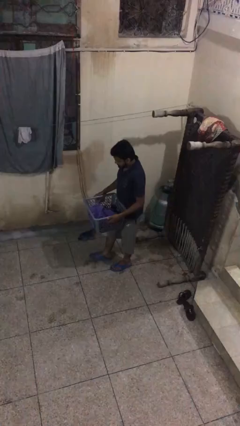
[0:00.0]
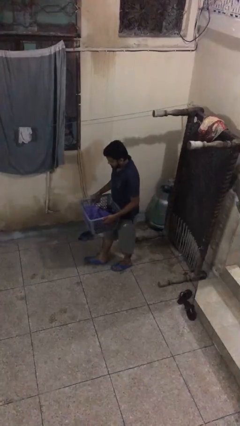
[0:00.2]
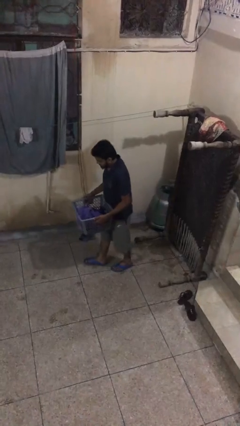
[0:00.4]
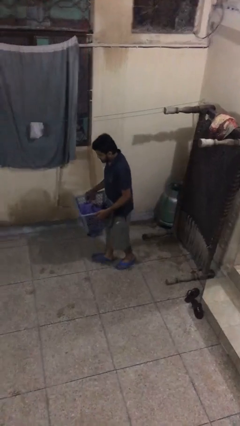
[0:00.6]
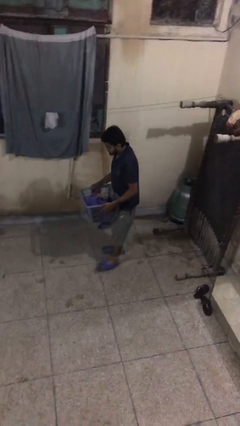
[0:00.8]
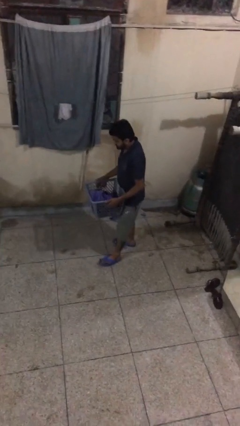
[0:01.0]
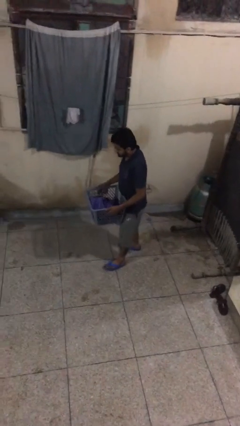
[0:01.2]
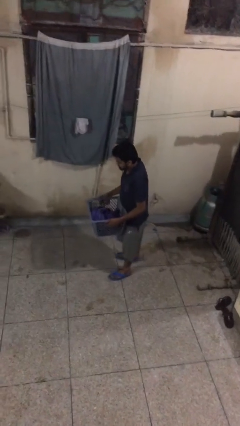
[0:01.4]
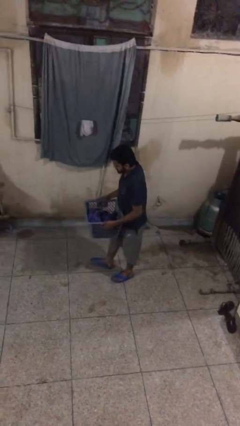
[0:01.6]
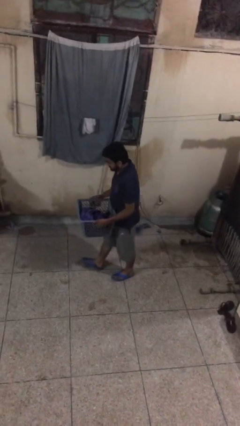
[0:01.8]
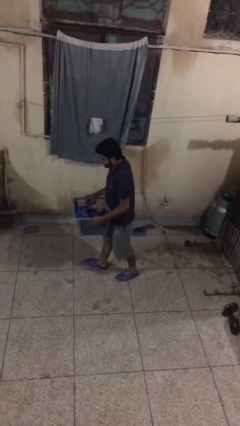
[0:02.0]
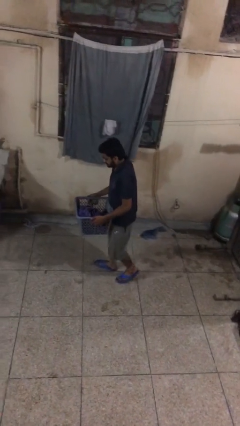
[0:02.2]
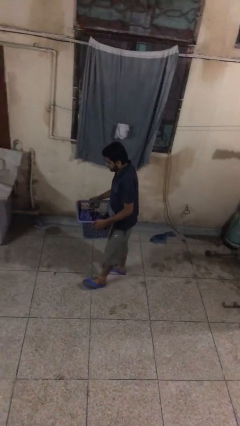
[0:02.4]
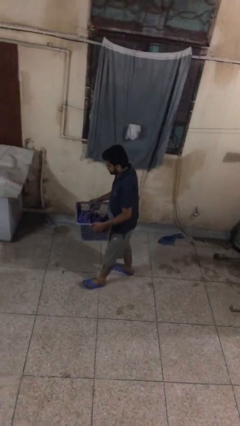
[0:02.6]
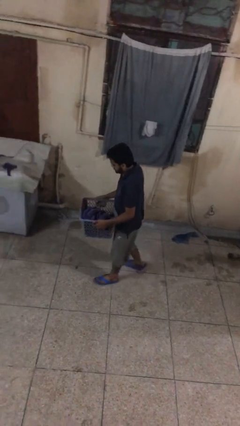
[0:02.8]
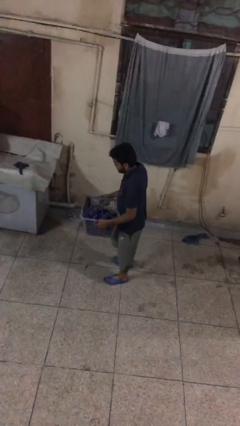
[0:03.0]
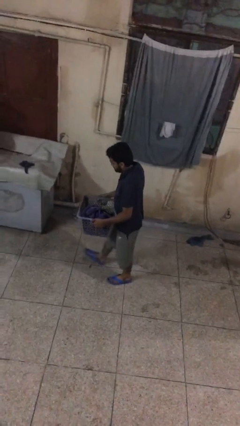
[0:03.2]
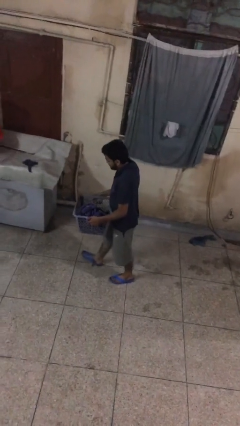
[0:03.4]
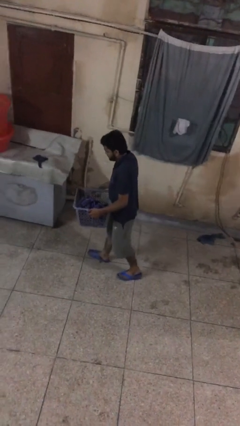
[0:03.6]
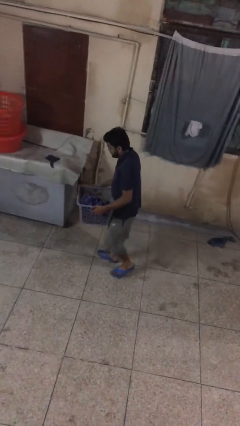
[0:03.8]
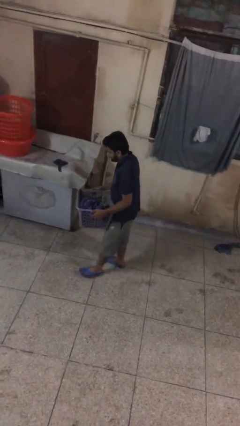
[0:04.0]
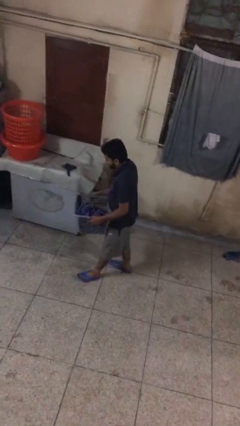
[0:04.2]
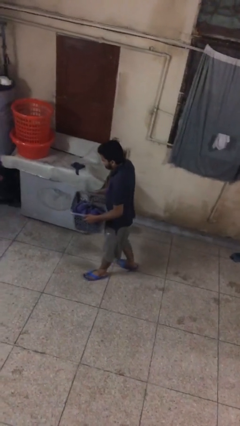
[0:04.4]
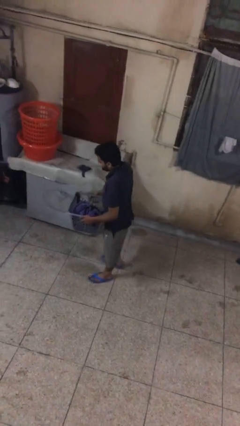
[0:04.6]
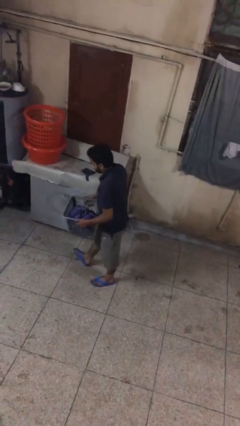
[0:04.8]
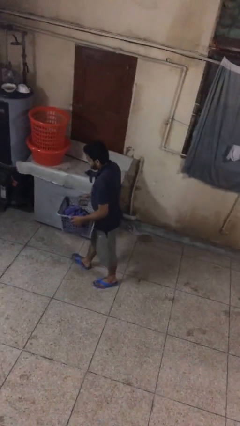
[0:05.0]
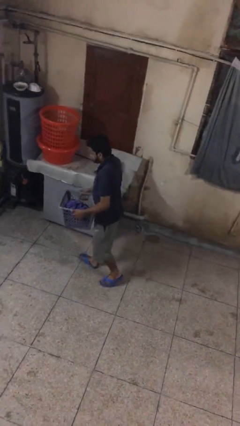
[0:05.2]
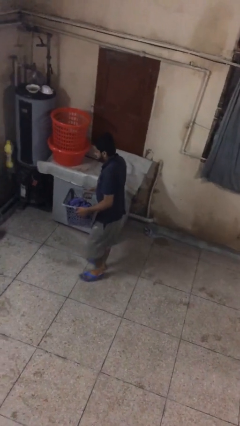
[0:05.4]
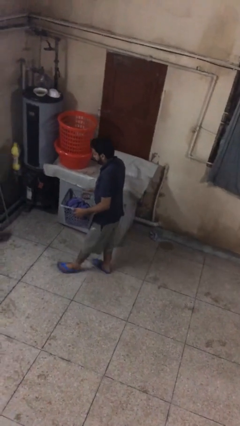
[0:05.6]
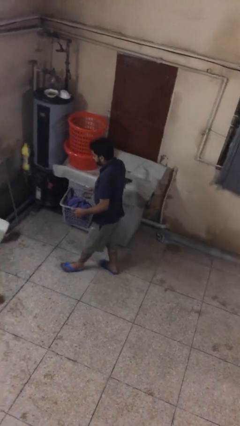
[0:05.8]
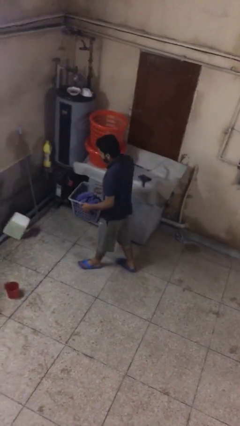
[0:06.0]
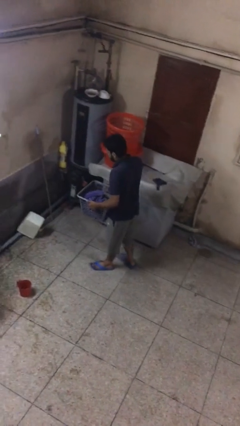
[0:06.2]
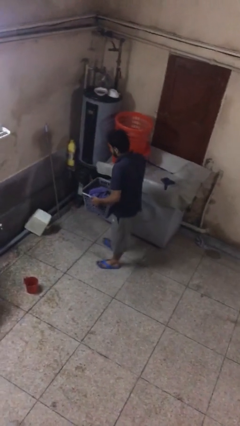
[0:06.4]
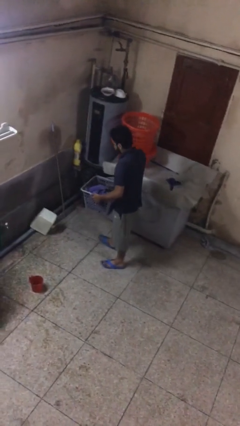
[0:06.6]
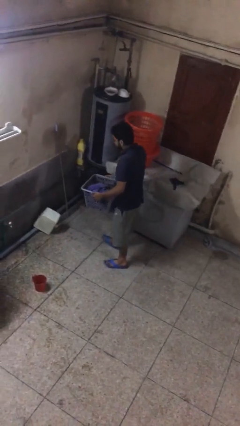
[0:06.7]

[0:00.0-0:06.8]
person carries heavy object

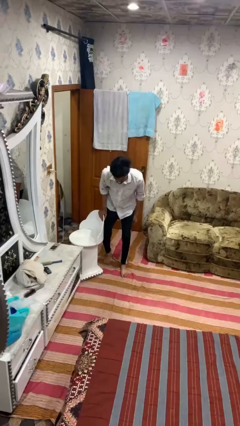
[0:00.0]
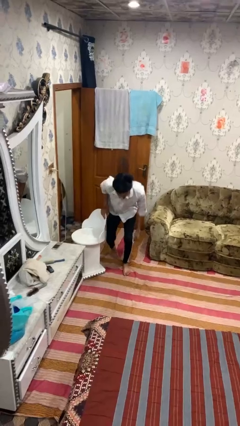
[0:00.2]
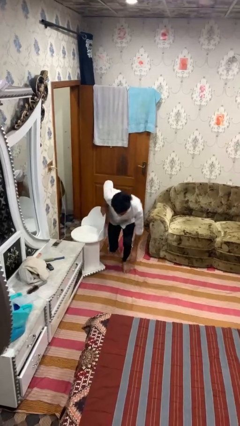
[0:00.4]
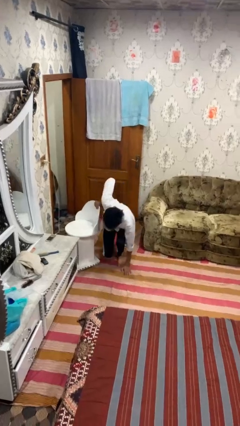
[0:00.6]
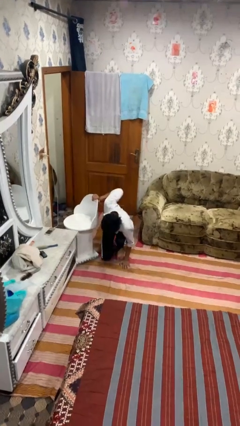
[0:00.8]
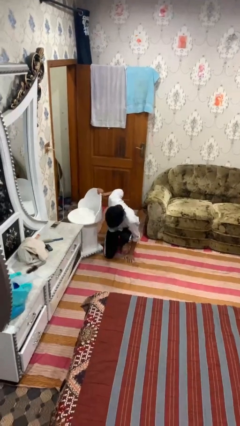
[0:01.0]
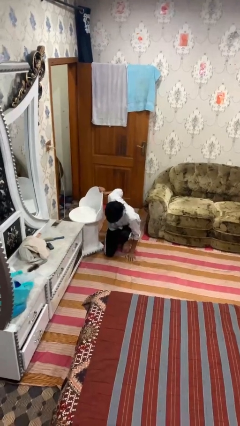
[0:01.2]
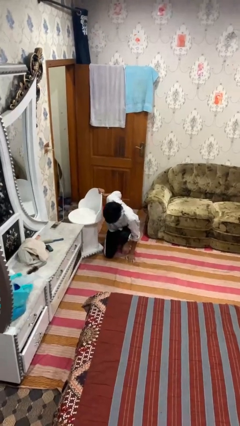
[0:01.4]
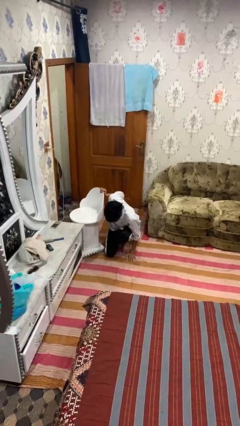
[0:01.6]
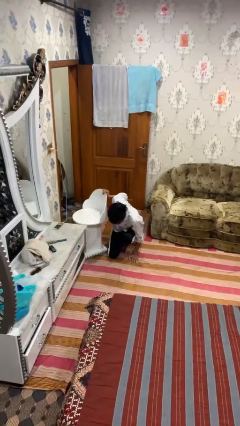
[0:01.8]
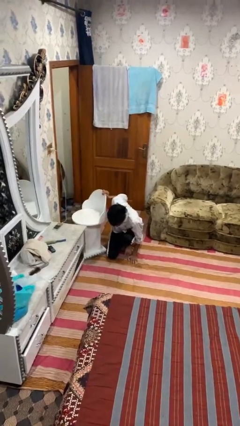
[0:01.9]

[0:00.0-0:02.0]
person lies down on floor

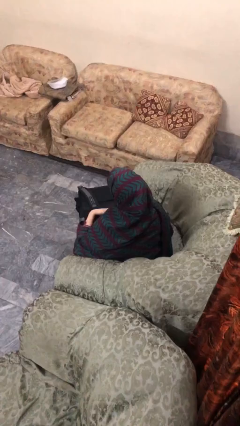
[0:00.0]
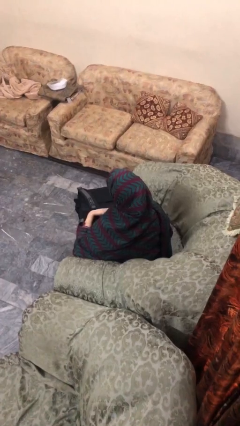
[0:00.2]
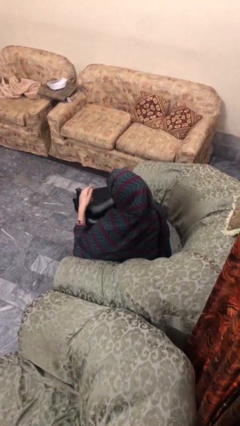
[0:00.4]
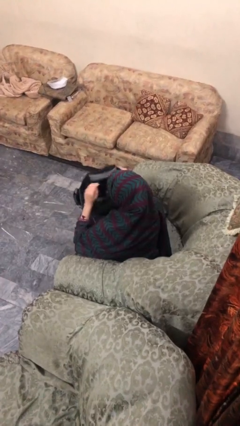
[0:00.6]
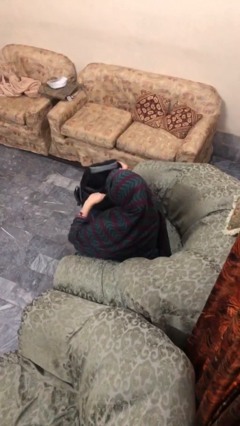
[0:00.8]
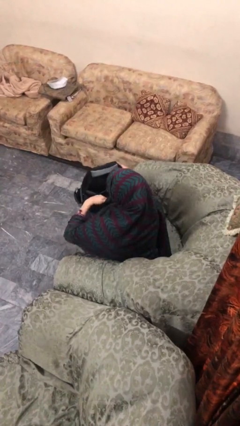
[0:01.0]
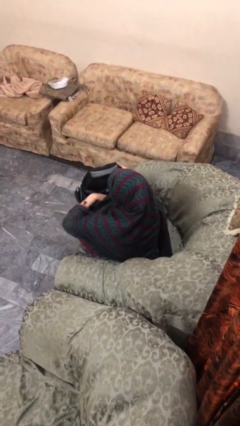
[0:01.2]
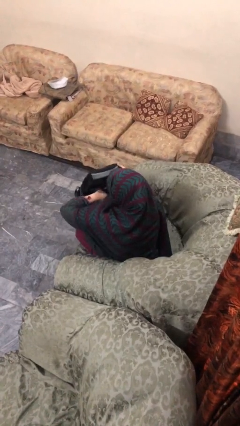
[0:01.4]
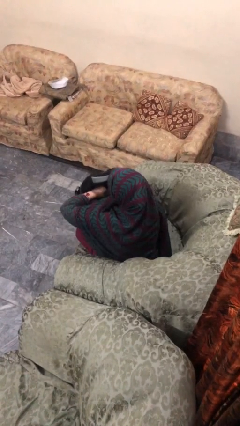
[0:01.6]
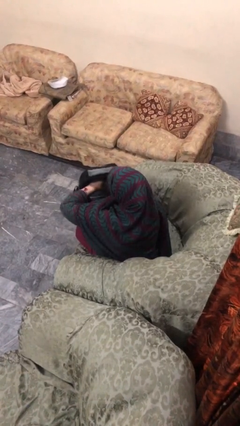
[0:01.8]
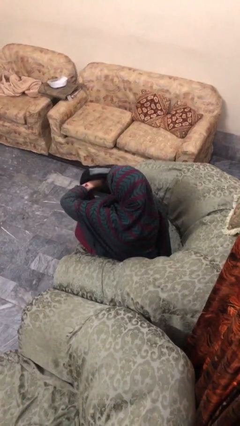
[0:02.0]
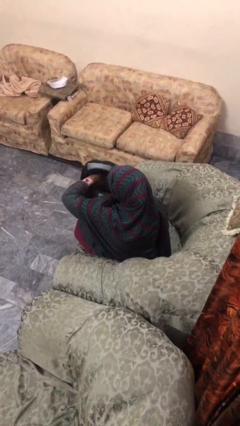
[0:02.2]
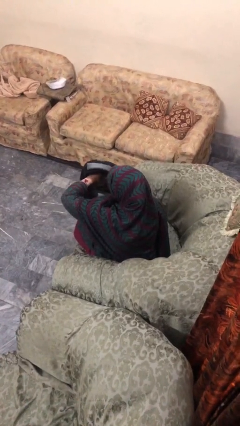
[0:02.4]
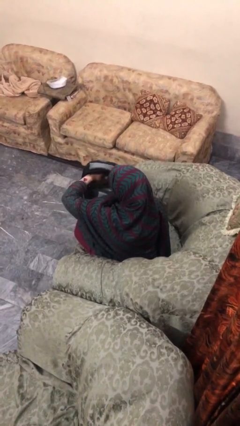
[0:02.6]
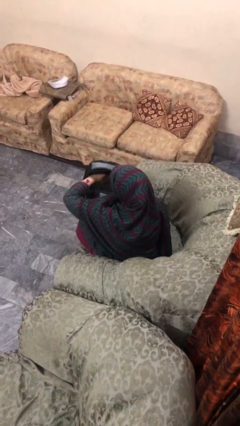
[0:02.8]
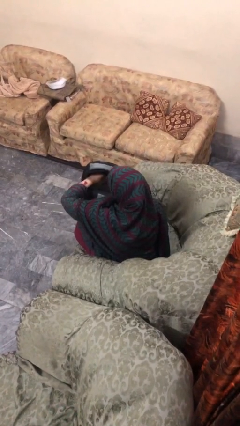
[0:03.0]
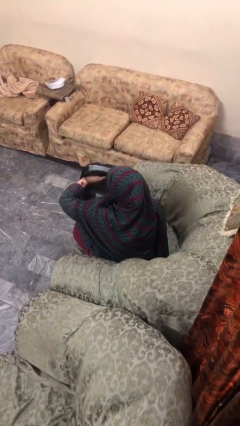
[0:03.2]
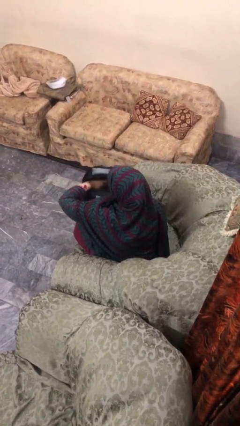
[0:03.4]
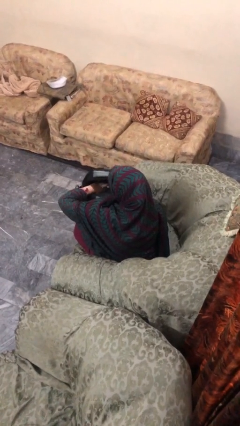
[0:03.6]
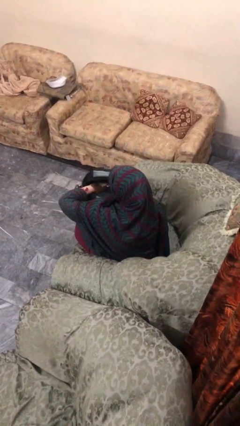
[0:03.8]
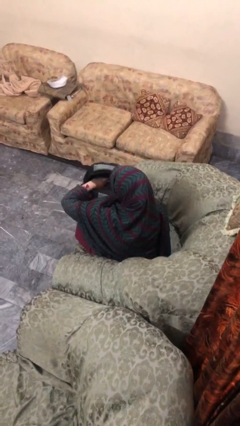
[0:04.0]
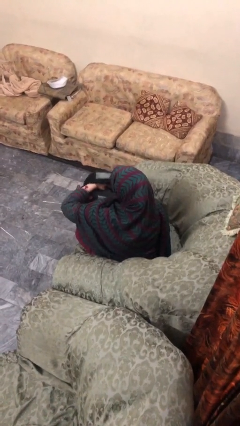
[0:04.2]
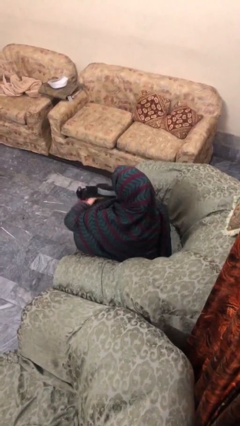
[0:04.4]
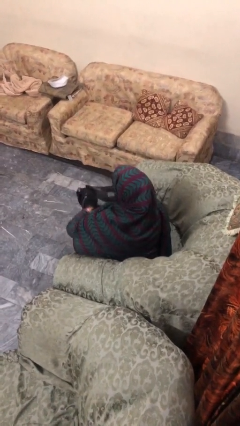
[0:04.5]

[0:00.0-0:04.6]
person searches in bag

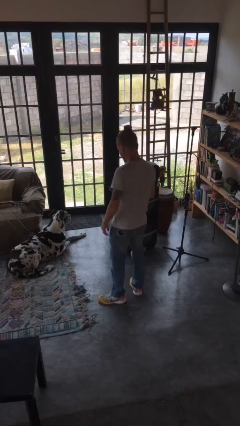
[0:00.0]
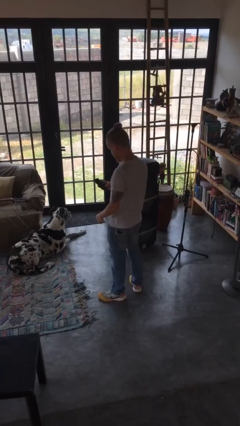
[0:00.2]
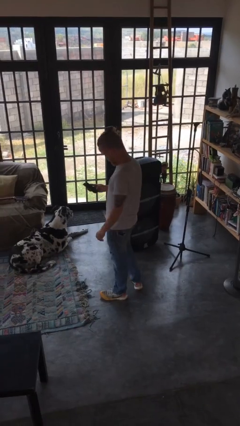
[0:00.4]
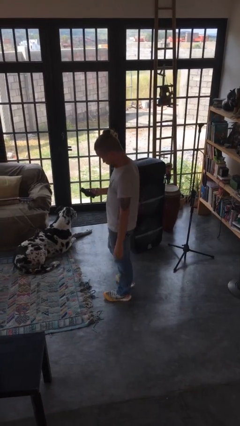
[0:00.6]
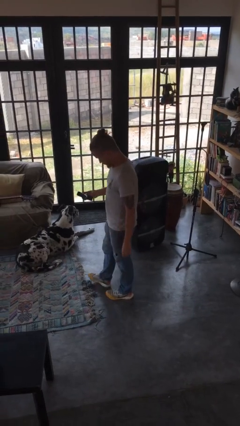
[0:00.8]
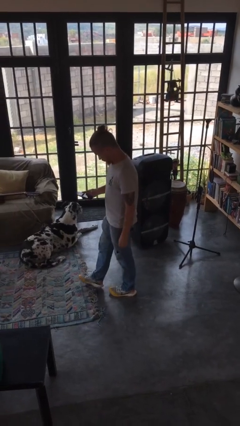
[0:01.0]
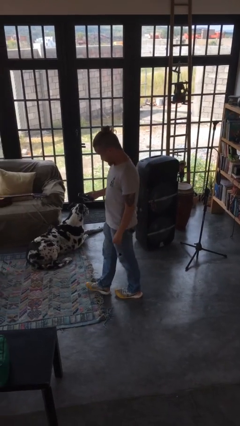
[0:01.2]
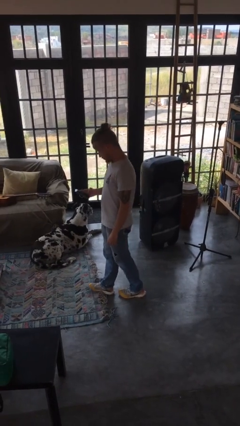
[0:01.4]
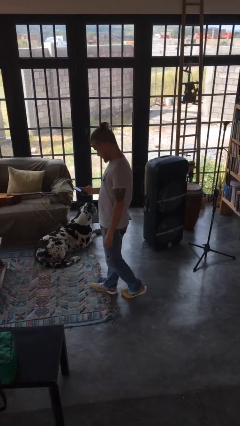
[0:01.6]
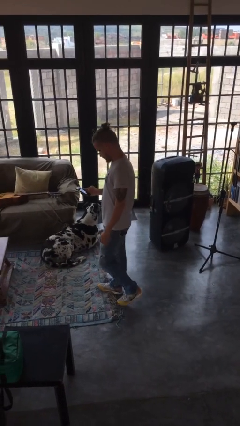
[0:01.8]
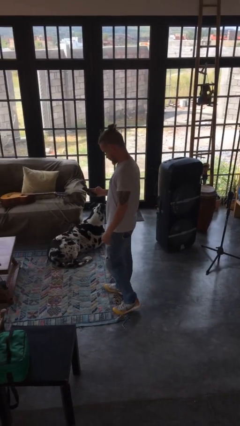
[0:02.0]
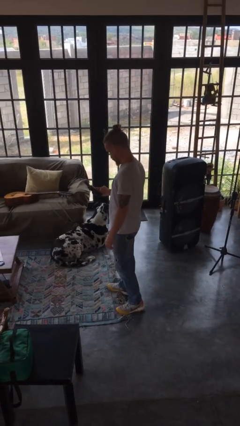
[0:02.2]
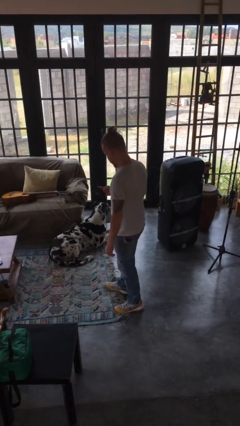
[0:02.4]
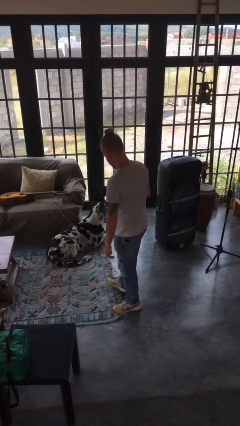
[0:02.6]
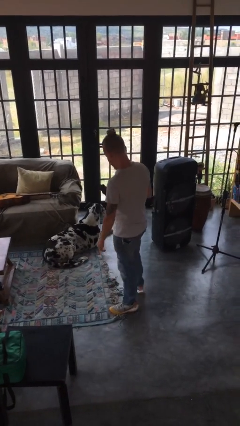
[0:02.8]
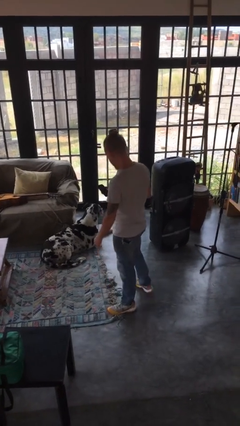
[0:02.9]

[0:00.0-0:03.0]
person takes selfie

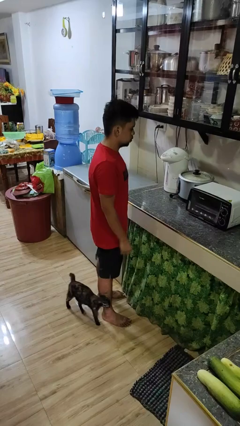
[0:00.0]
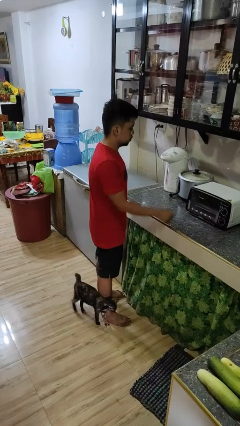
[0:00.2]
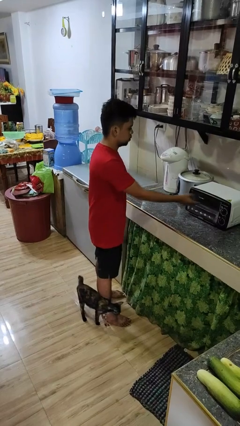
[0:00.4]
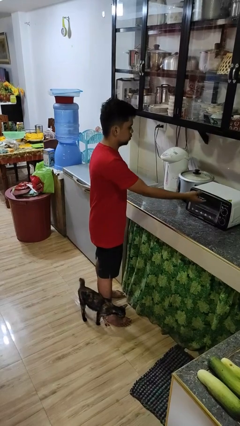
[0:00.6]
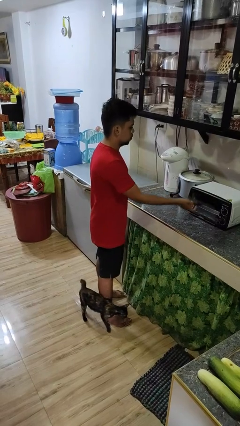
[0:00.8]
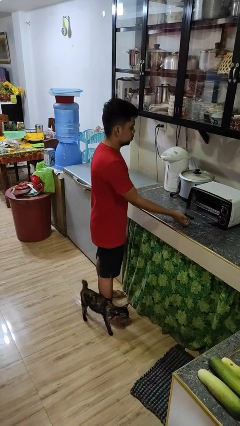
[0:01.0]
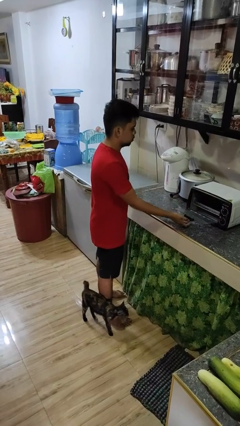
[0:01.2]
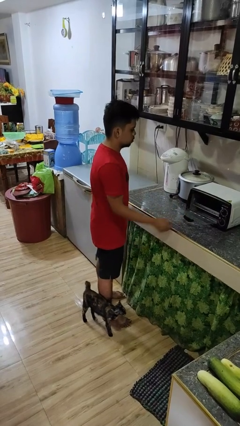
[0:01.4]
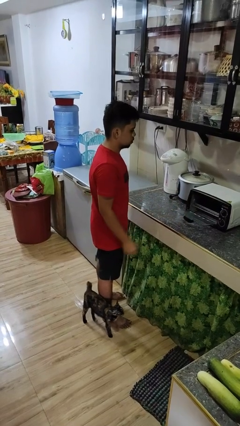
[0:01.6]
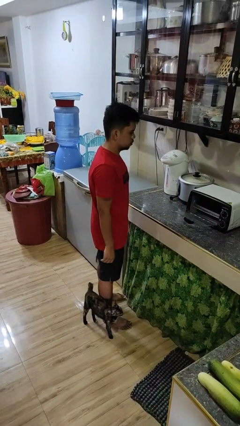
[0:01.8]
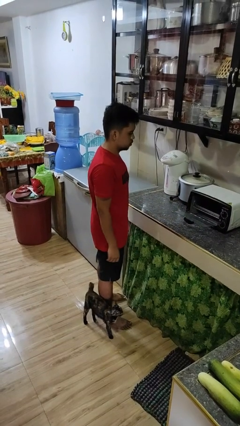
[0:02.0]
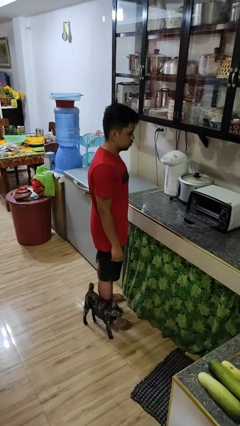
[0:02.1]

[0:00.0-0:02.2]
person opens microwave
